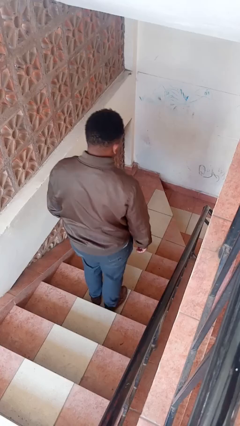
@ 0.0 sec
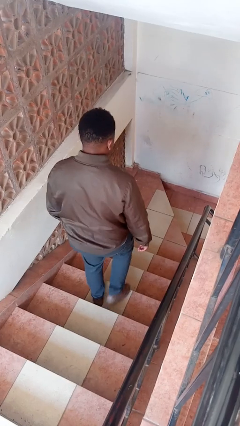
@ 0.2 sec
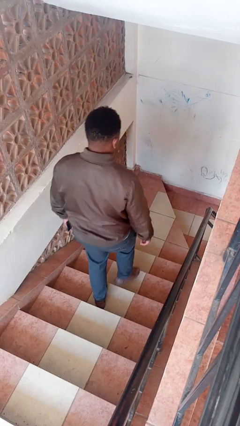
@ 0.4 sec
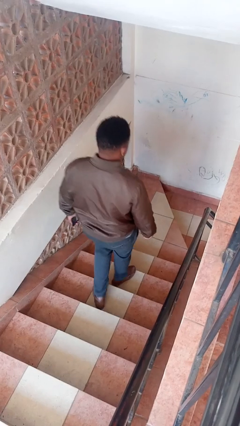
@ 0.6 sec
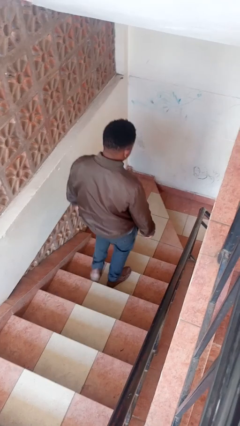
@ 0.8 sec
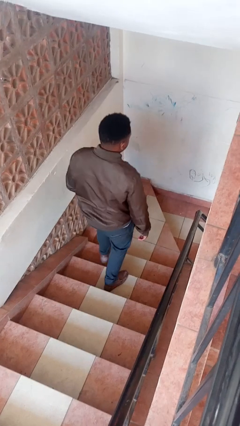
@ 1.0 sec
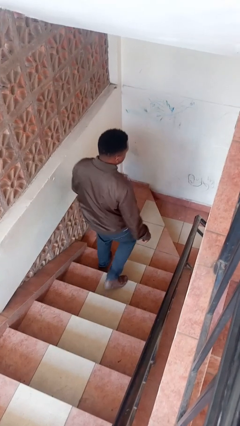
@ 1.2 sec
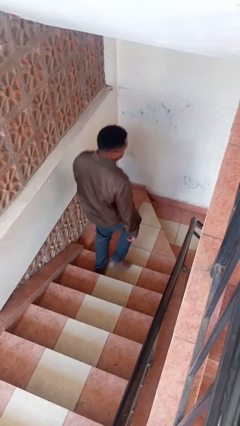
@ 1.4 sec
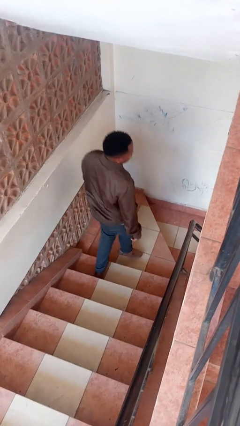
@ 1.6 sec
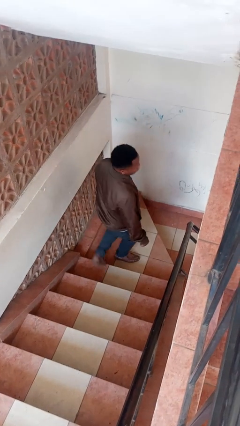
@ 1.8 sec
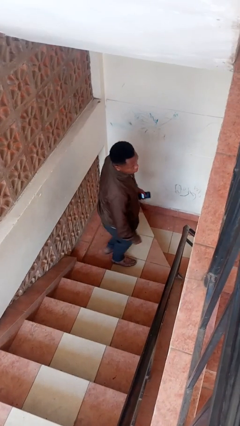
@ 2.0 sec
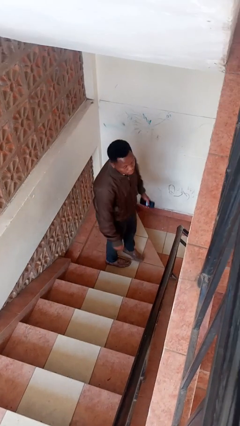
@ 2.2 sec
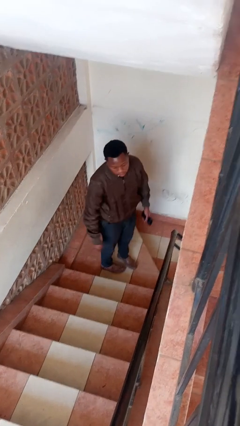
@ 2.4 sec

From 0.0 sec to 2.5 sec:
person climbs down stairs

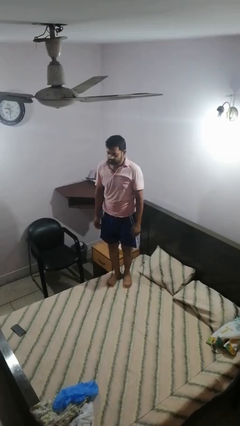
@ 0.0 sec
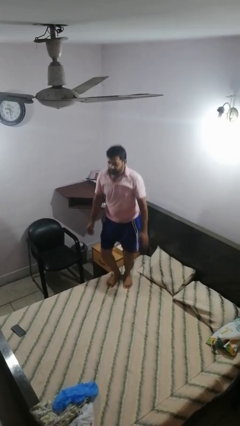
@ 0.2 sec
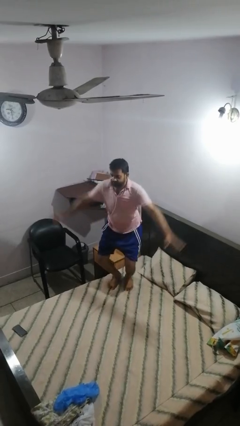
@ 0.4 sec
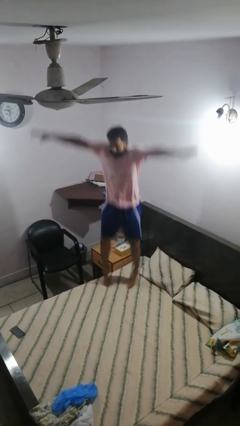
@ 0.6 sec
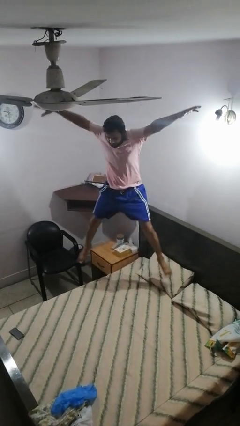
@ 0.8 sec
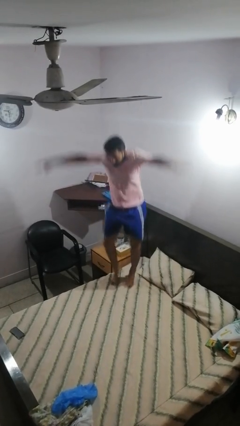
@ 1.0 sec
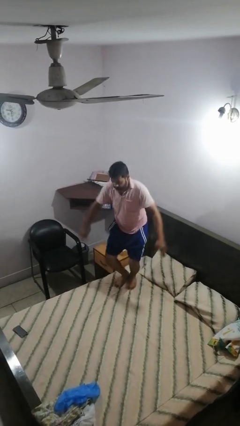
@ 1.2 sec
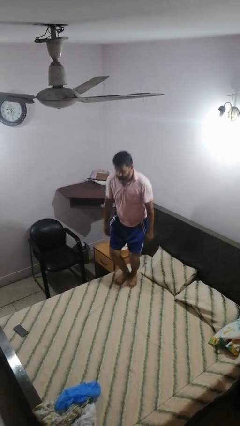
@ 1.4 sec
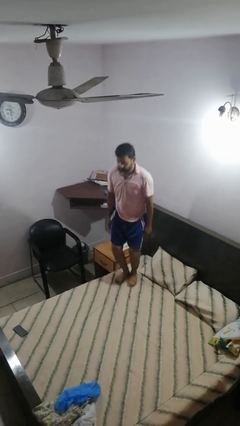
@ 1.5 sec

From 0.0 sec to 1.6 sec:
person jumps on bed

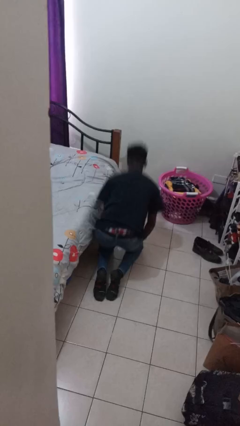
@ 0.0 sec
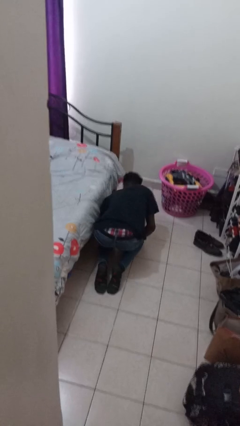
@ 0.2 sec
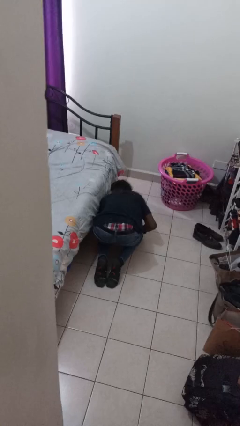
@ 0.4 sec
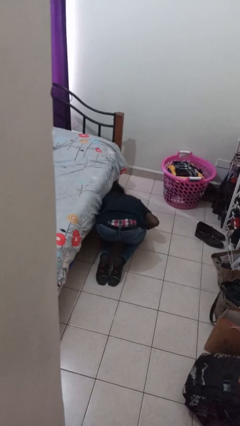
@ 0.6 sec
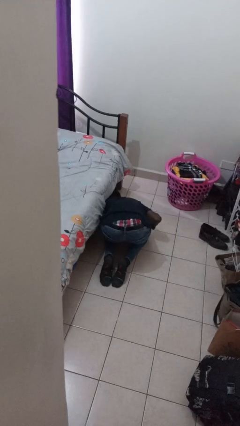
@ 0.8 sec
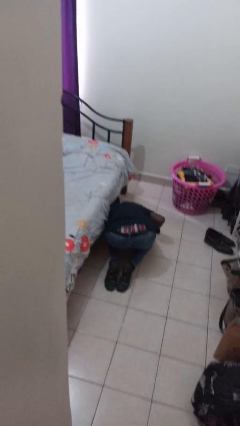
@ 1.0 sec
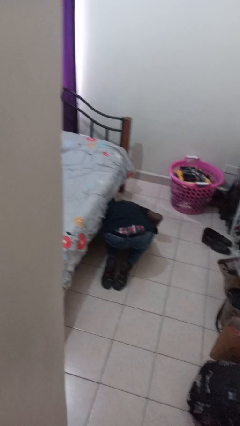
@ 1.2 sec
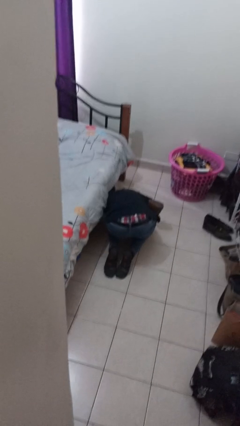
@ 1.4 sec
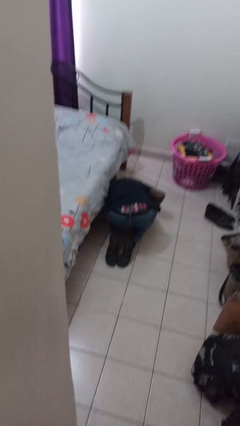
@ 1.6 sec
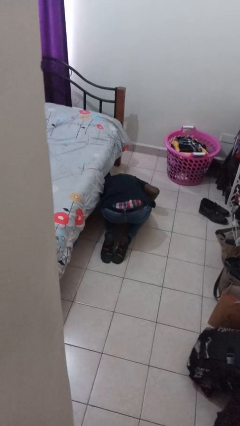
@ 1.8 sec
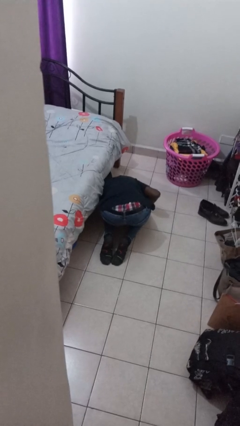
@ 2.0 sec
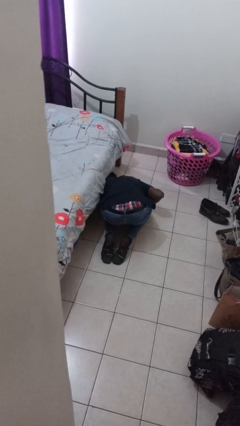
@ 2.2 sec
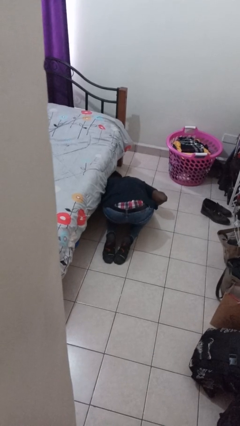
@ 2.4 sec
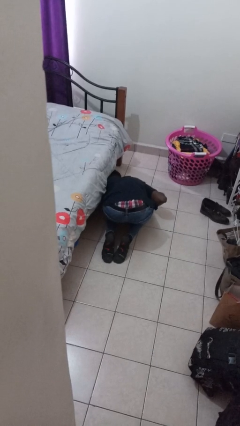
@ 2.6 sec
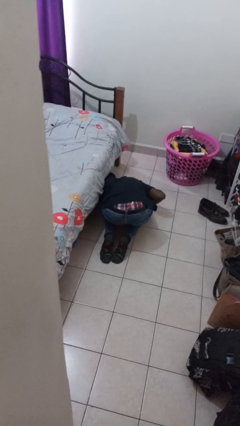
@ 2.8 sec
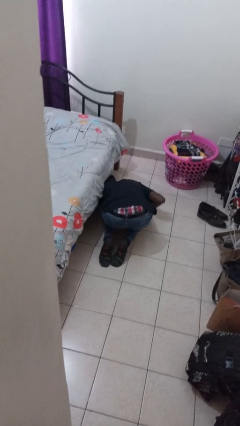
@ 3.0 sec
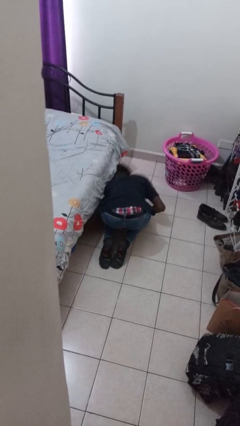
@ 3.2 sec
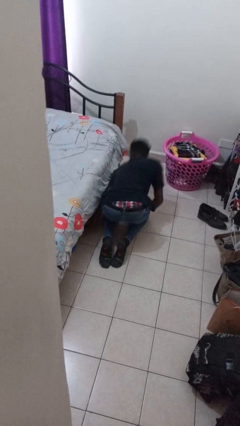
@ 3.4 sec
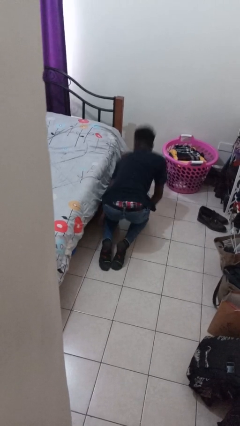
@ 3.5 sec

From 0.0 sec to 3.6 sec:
person searches under bed

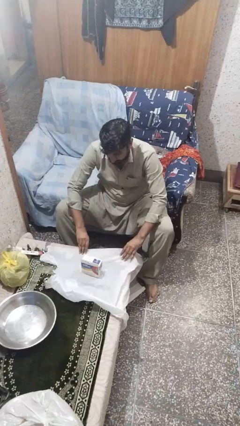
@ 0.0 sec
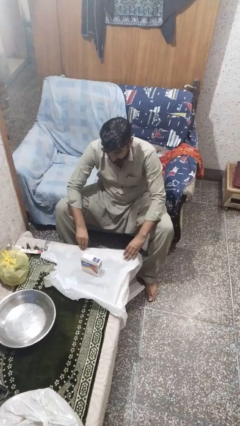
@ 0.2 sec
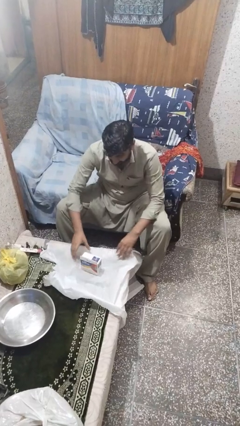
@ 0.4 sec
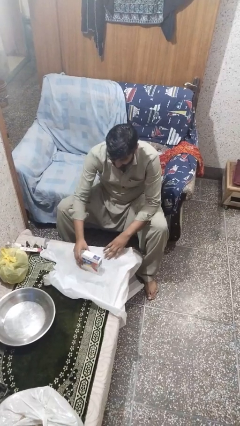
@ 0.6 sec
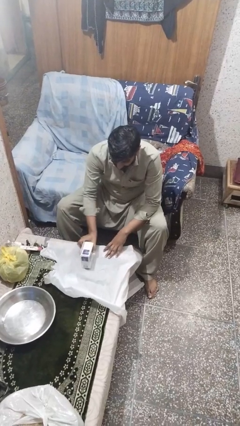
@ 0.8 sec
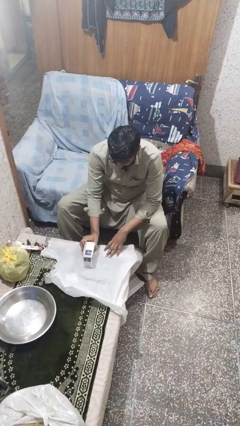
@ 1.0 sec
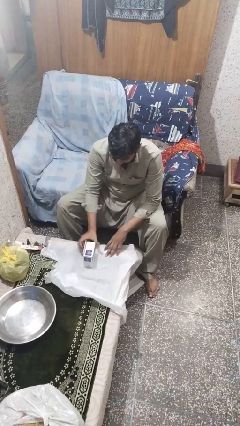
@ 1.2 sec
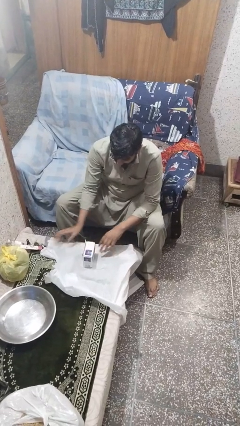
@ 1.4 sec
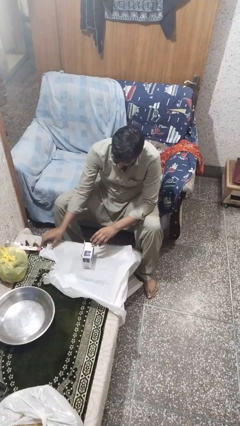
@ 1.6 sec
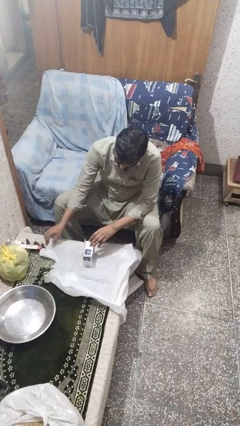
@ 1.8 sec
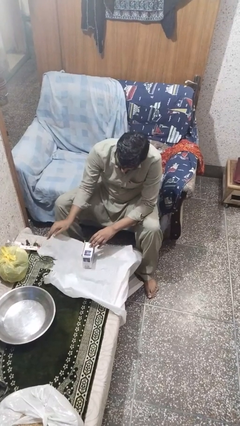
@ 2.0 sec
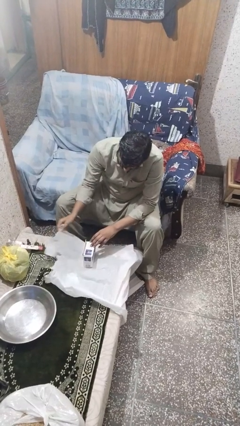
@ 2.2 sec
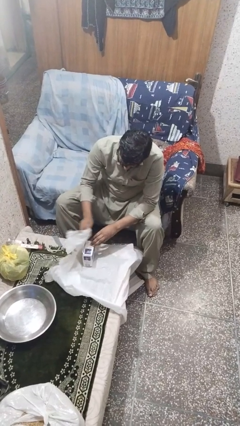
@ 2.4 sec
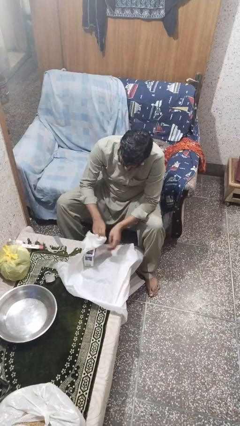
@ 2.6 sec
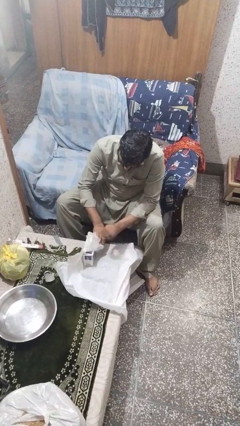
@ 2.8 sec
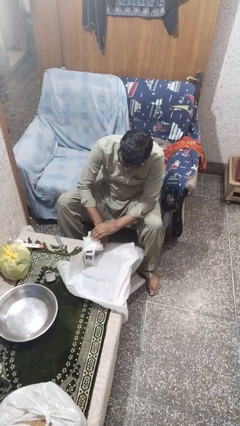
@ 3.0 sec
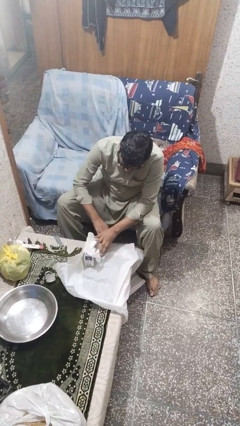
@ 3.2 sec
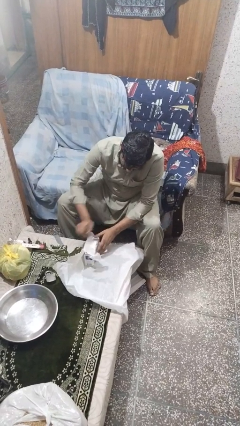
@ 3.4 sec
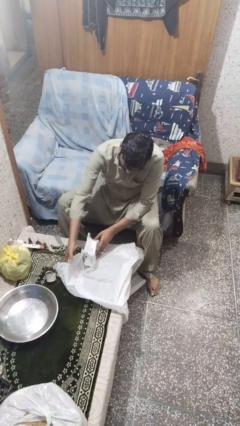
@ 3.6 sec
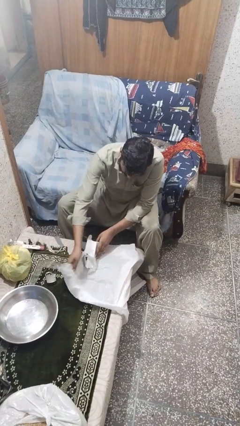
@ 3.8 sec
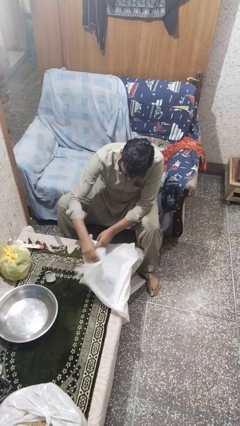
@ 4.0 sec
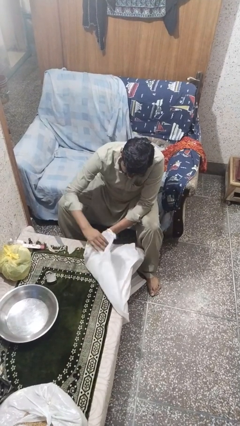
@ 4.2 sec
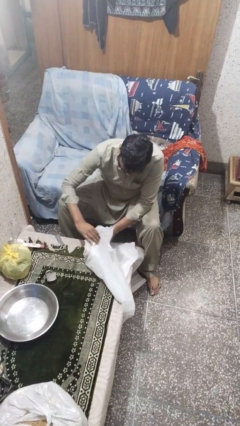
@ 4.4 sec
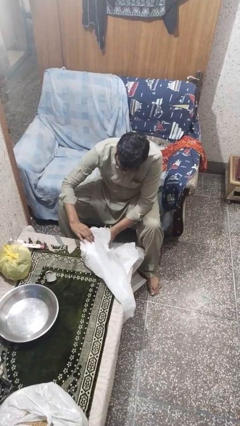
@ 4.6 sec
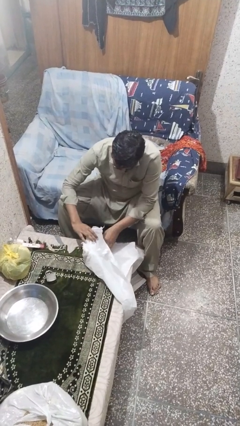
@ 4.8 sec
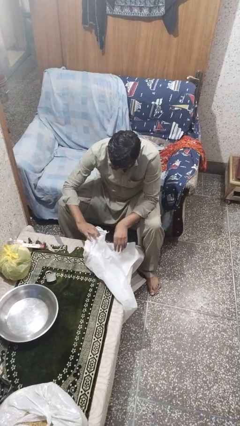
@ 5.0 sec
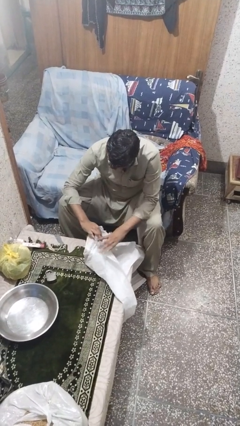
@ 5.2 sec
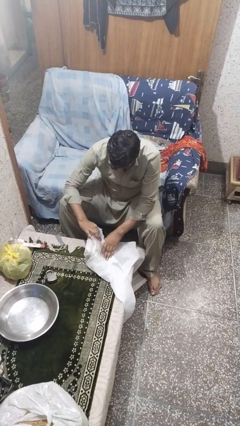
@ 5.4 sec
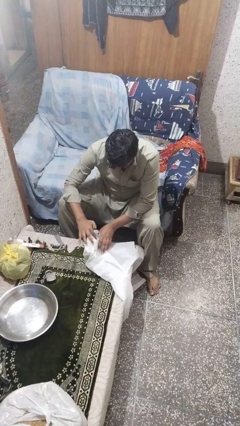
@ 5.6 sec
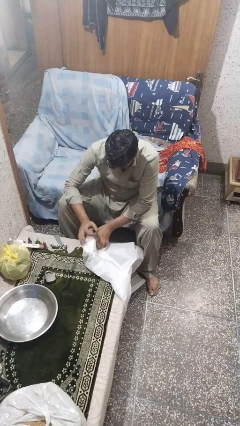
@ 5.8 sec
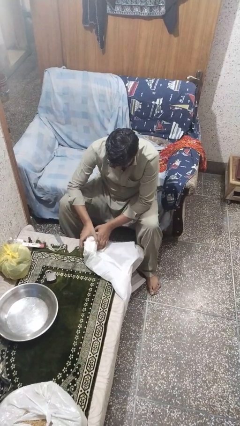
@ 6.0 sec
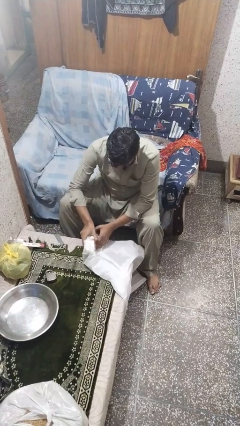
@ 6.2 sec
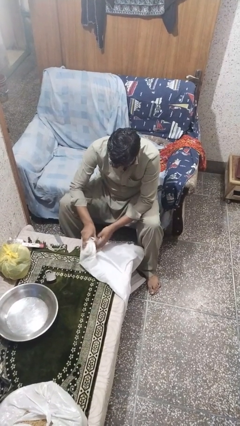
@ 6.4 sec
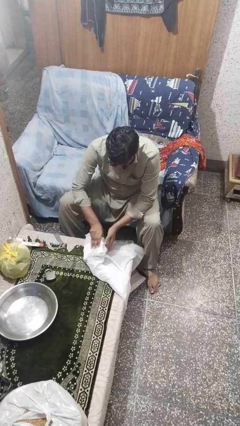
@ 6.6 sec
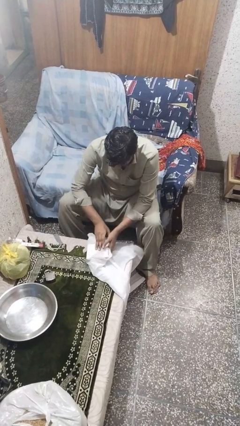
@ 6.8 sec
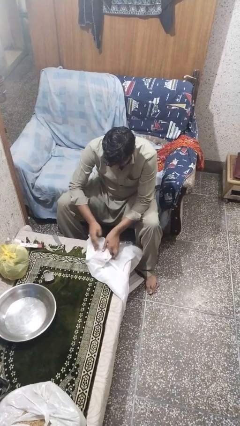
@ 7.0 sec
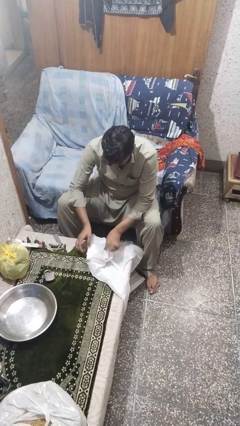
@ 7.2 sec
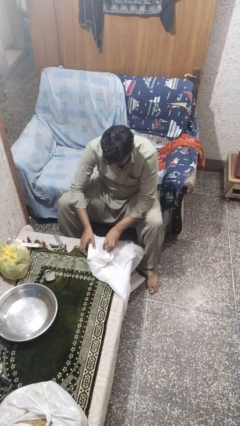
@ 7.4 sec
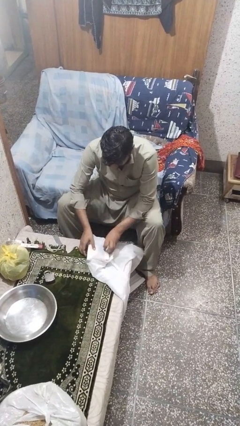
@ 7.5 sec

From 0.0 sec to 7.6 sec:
person wraps box

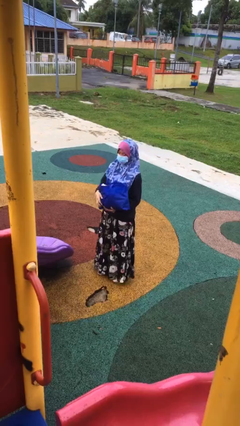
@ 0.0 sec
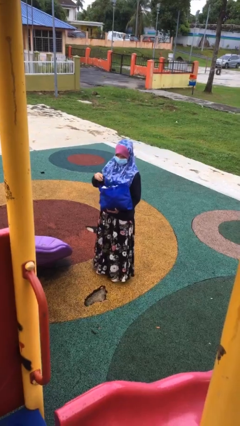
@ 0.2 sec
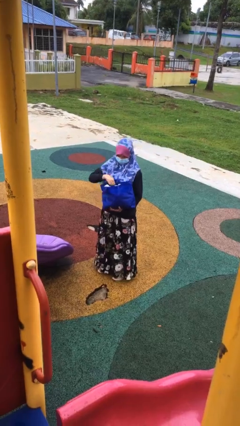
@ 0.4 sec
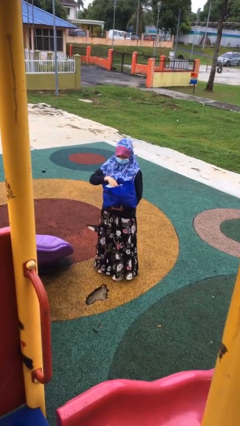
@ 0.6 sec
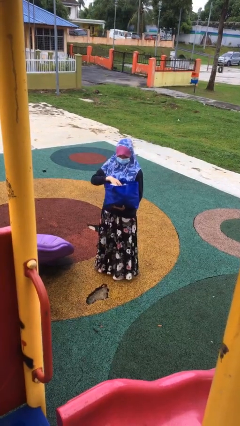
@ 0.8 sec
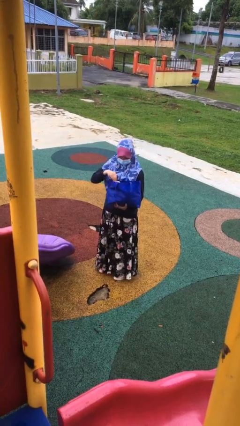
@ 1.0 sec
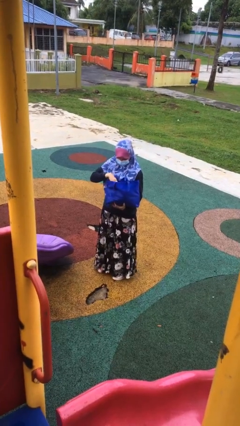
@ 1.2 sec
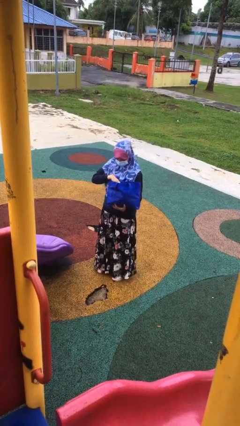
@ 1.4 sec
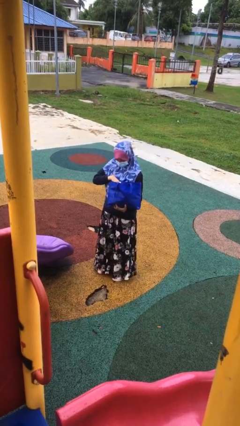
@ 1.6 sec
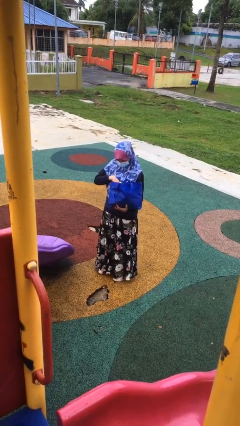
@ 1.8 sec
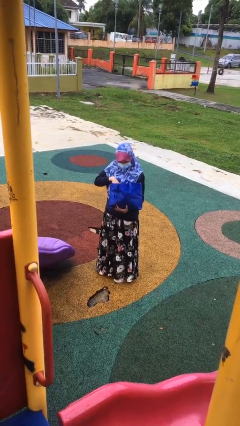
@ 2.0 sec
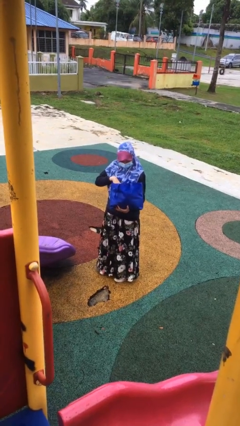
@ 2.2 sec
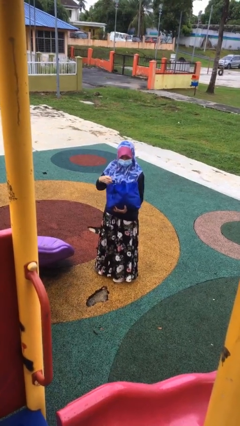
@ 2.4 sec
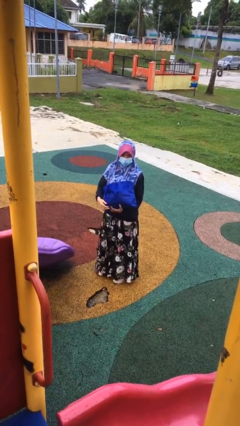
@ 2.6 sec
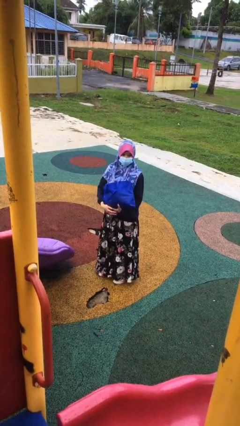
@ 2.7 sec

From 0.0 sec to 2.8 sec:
person searches in bag
